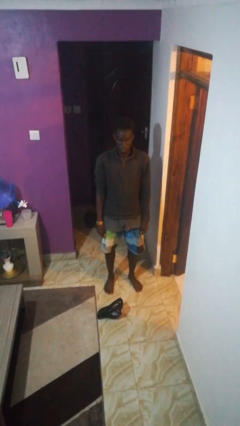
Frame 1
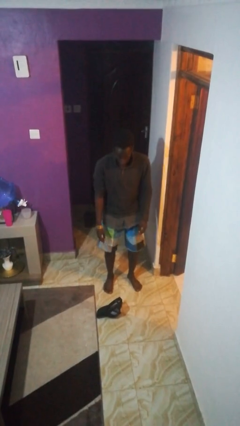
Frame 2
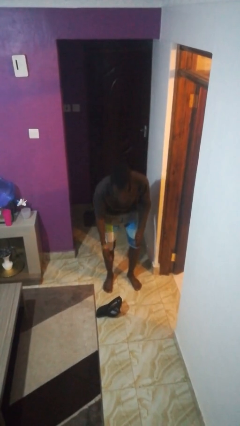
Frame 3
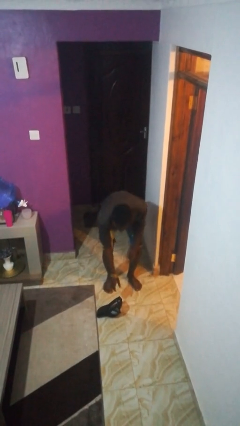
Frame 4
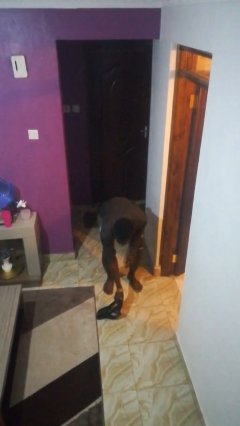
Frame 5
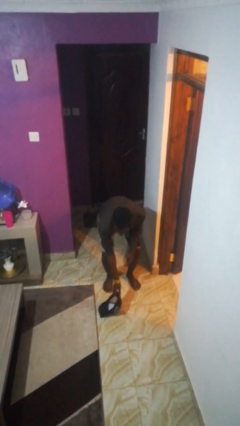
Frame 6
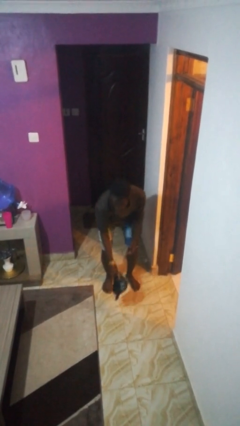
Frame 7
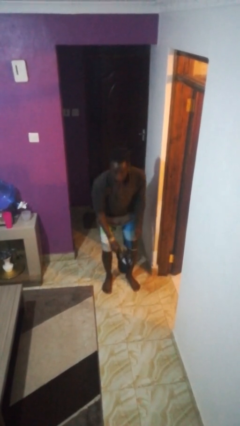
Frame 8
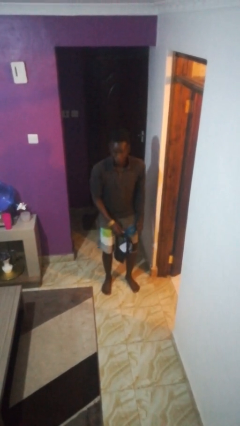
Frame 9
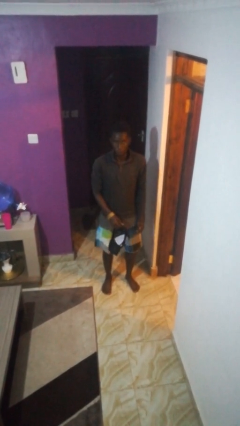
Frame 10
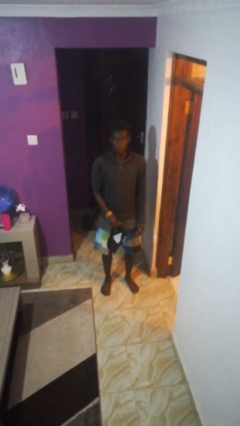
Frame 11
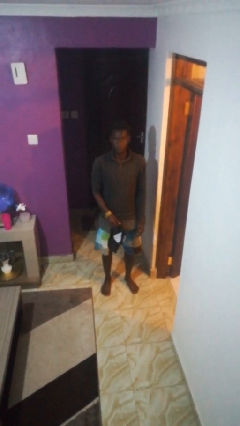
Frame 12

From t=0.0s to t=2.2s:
person picks up object from floor

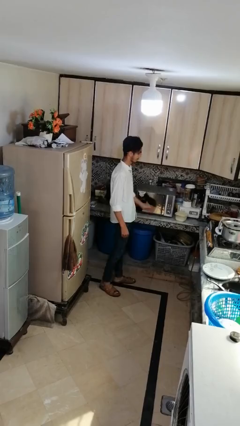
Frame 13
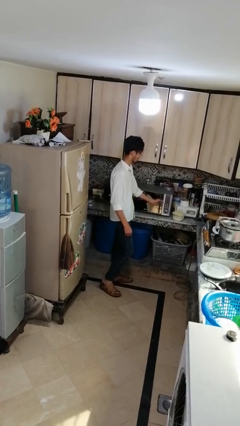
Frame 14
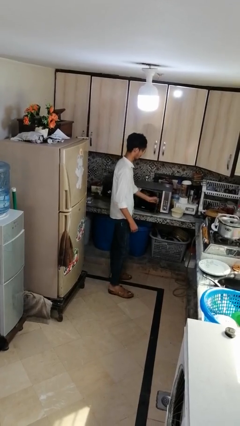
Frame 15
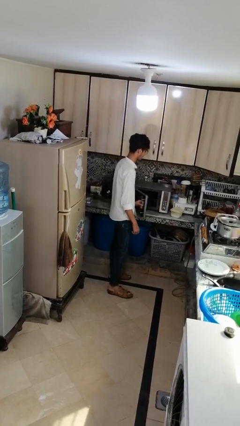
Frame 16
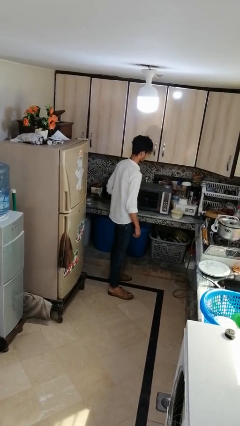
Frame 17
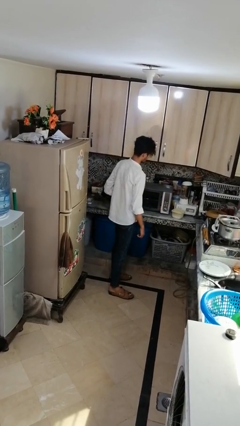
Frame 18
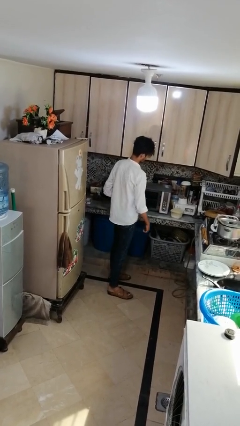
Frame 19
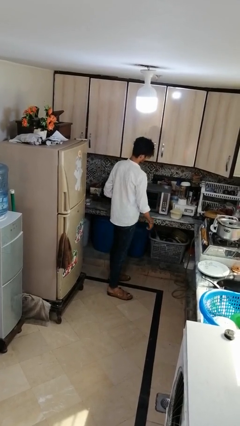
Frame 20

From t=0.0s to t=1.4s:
person opens microwave

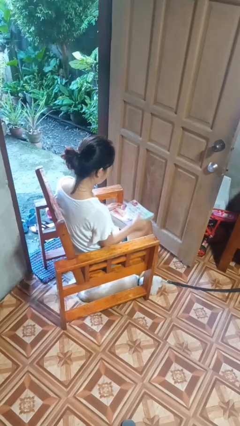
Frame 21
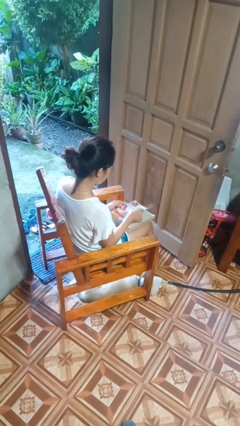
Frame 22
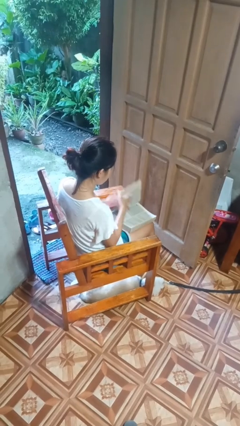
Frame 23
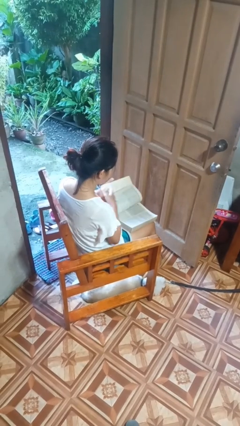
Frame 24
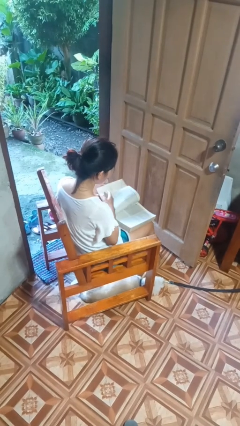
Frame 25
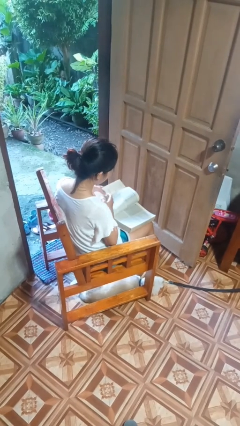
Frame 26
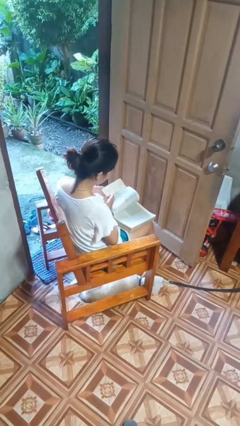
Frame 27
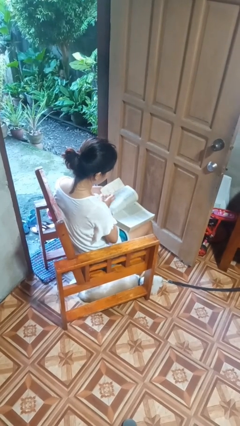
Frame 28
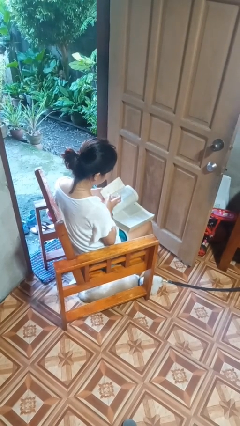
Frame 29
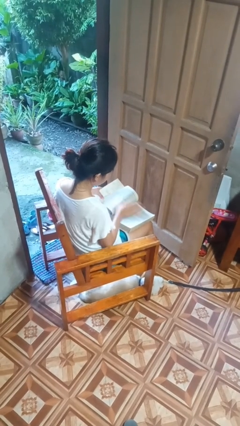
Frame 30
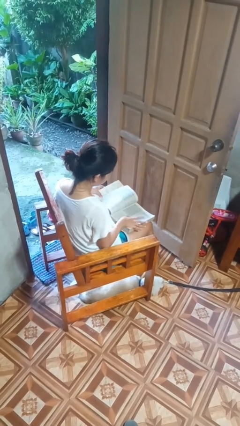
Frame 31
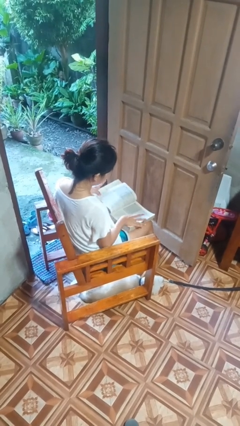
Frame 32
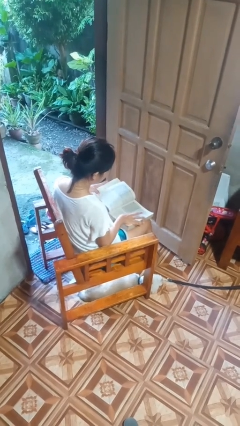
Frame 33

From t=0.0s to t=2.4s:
person reads book

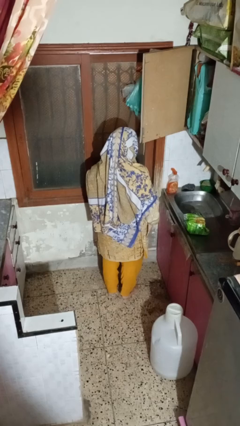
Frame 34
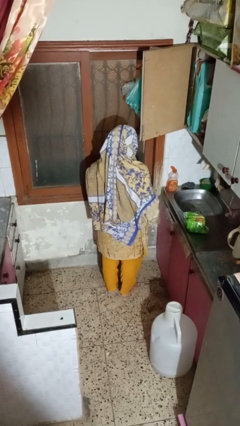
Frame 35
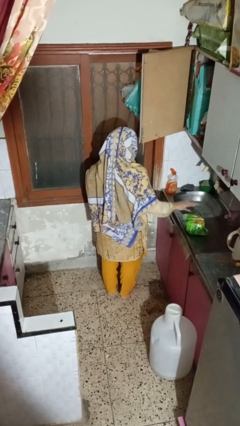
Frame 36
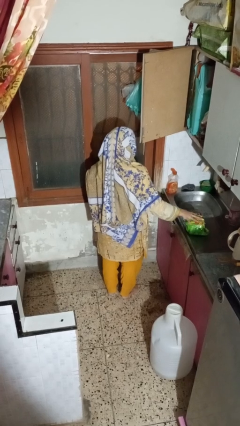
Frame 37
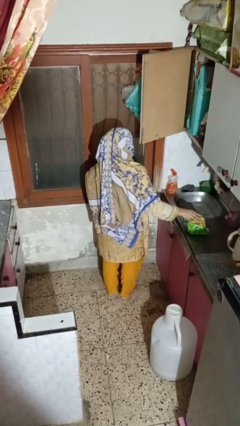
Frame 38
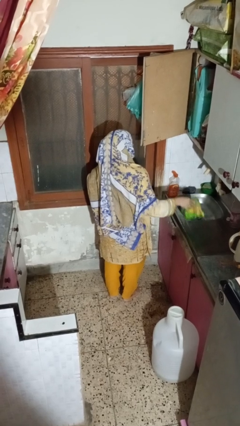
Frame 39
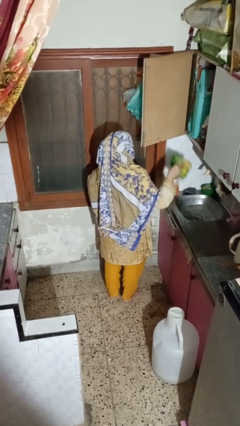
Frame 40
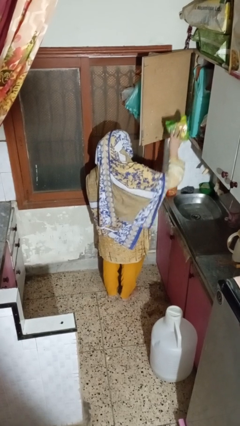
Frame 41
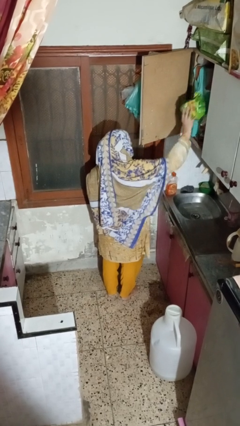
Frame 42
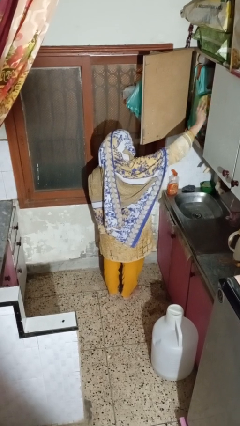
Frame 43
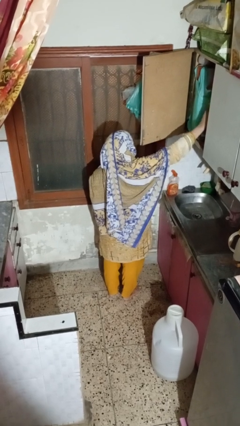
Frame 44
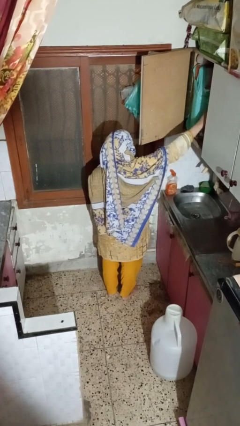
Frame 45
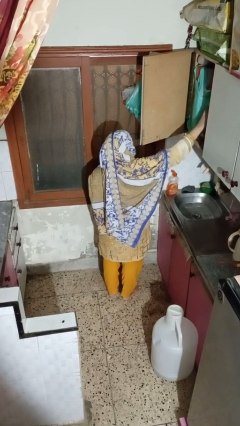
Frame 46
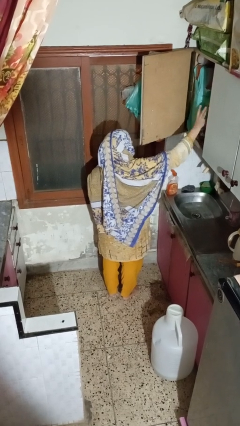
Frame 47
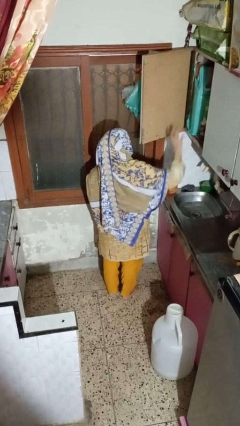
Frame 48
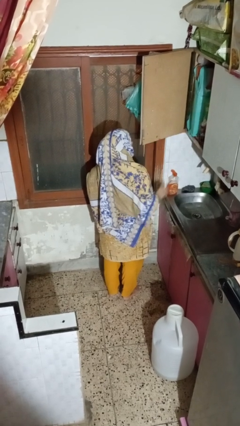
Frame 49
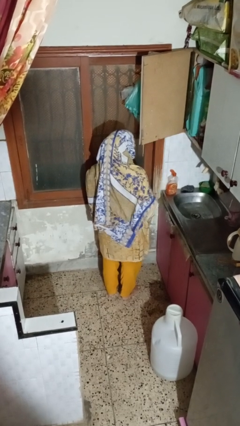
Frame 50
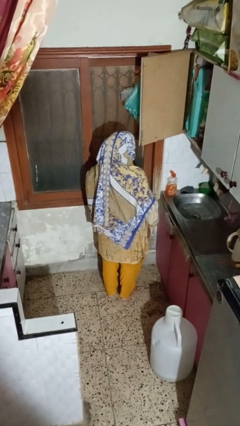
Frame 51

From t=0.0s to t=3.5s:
person puts object in cabinet

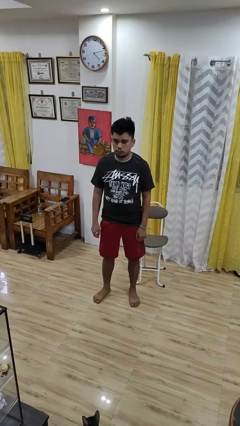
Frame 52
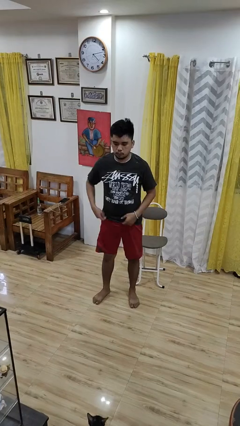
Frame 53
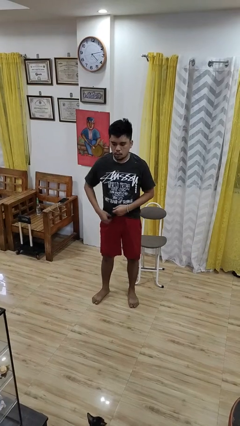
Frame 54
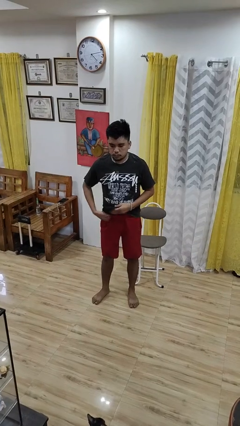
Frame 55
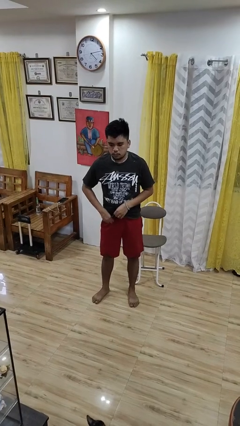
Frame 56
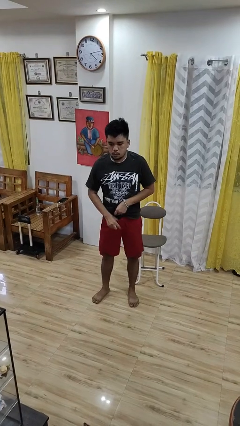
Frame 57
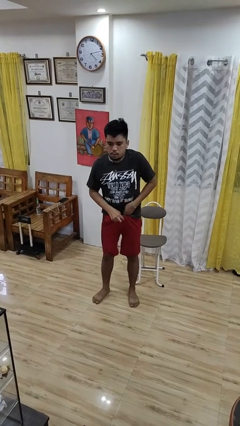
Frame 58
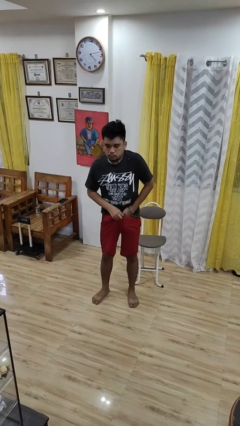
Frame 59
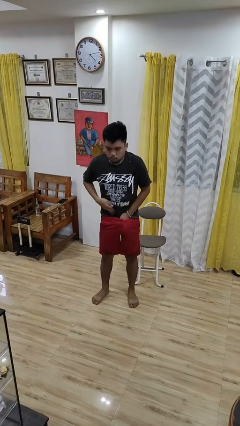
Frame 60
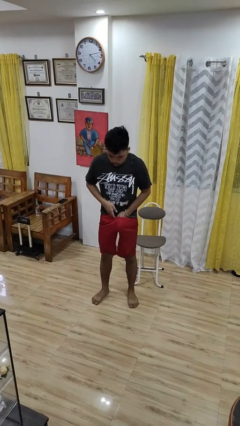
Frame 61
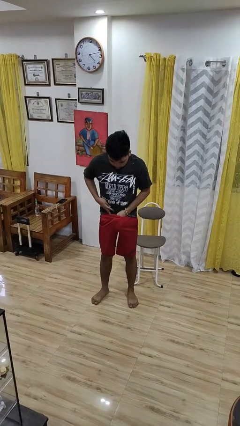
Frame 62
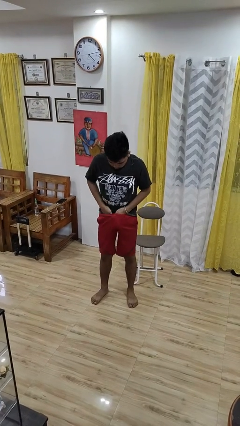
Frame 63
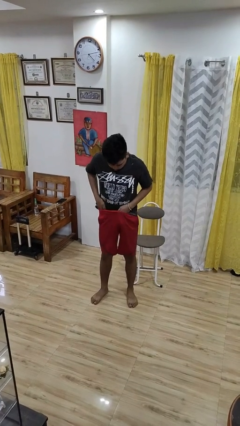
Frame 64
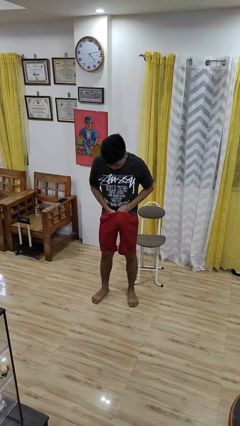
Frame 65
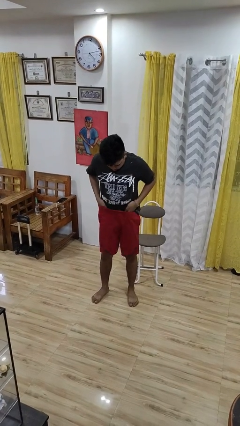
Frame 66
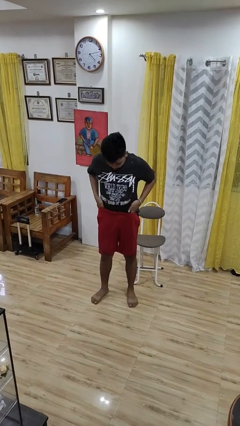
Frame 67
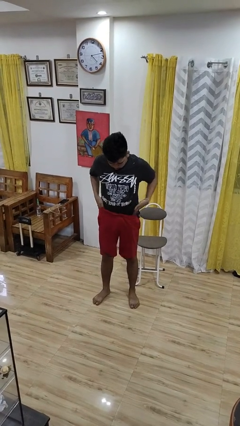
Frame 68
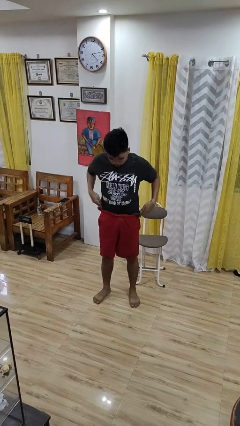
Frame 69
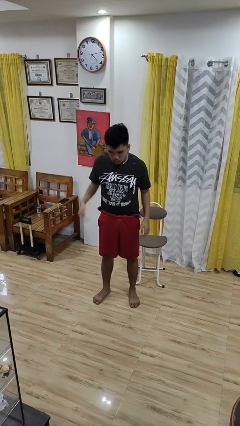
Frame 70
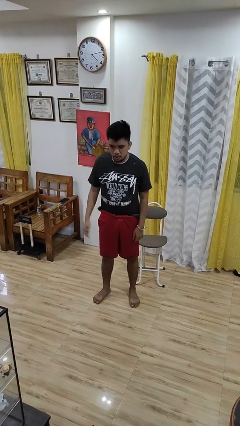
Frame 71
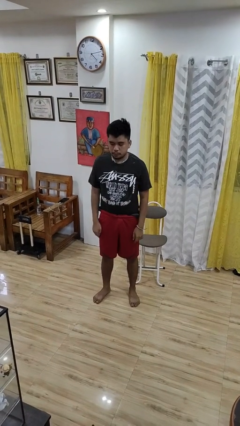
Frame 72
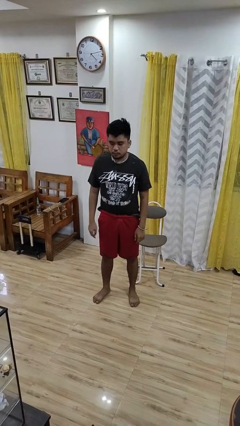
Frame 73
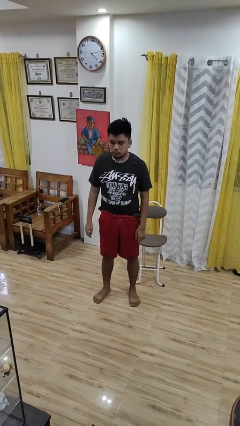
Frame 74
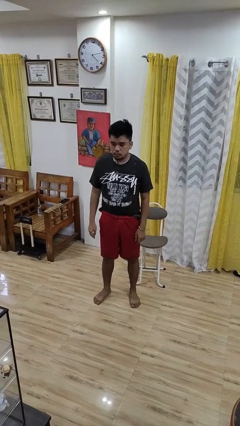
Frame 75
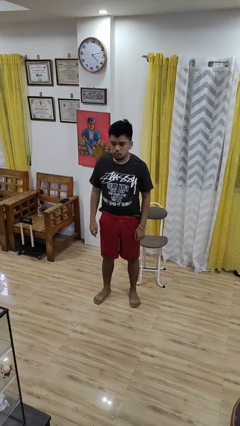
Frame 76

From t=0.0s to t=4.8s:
person tucks in shirt

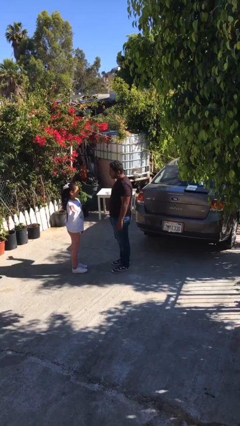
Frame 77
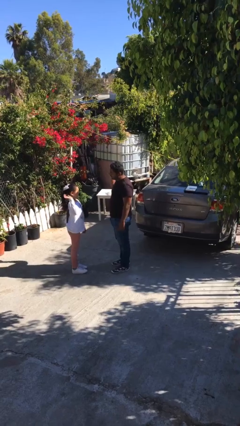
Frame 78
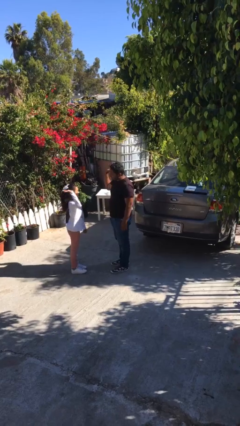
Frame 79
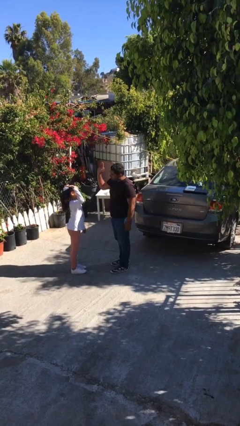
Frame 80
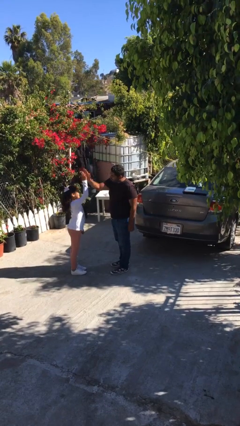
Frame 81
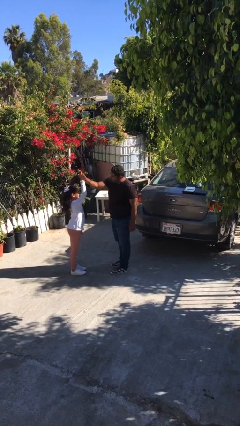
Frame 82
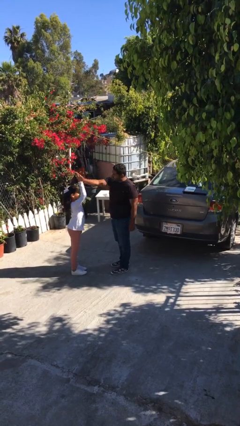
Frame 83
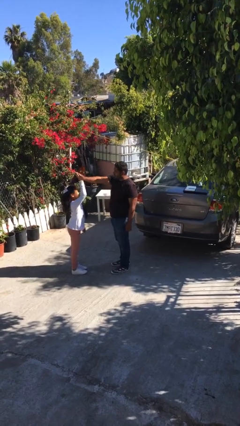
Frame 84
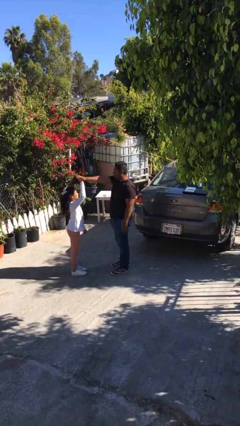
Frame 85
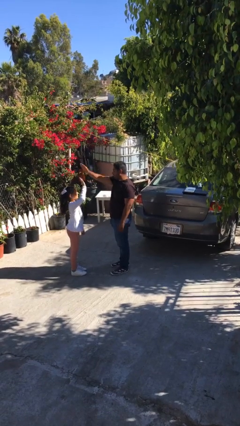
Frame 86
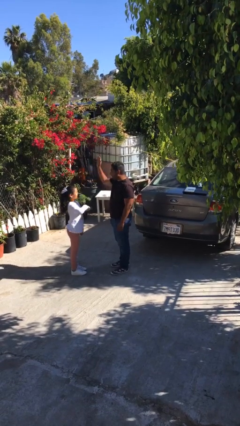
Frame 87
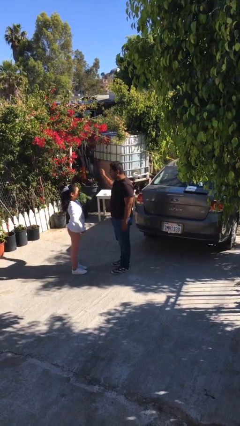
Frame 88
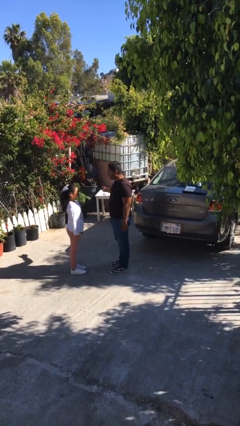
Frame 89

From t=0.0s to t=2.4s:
person highfives hand

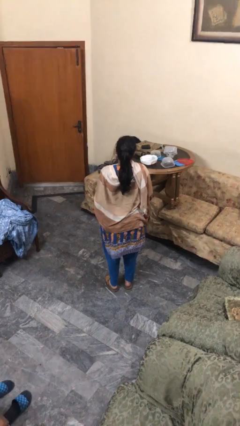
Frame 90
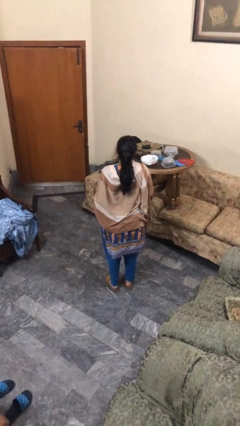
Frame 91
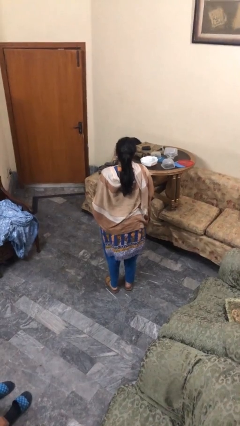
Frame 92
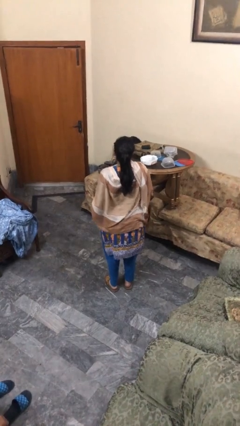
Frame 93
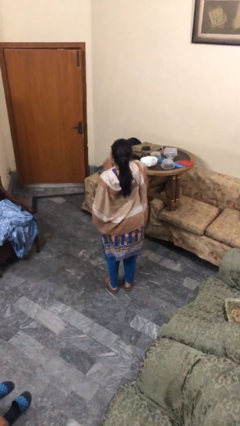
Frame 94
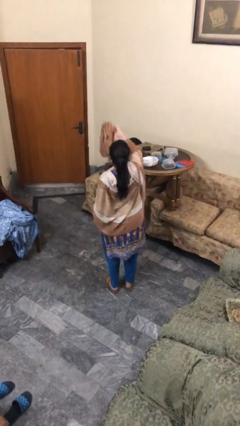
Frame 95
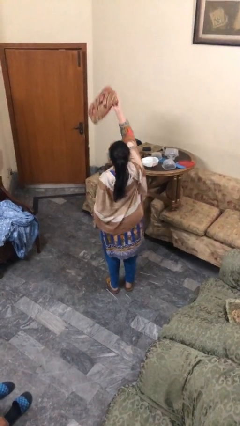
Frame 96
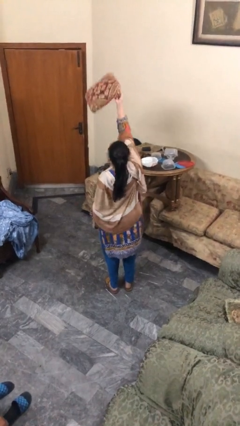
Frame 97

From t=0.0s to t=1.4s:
person drops object
